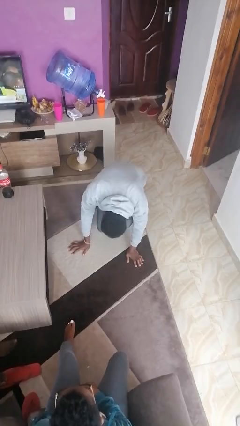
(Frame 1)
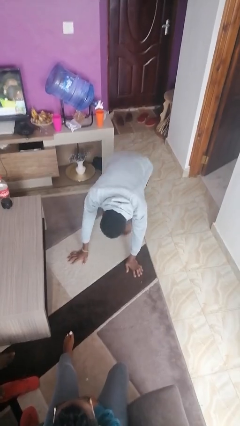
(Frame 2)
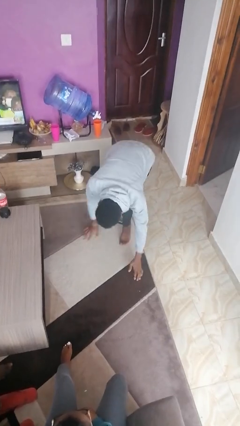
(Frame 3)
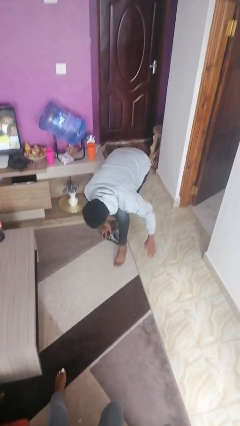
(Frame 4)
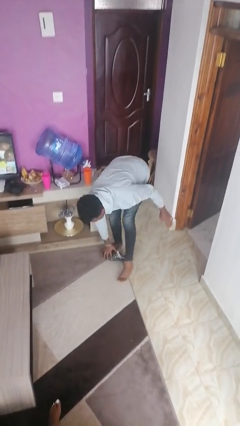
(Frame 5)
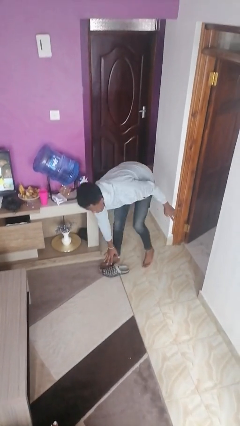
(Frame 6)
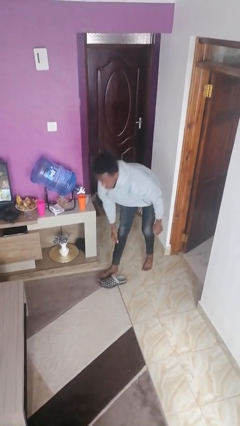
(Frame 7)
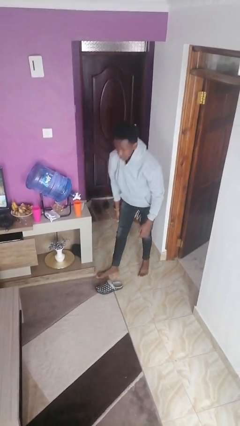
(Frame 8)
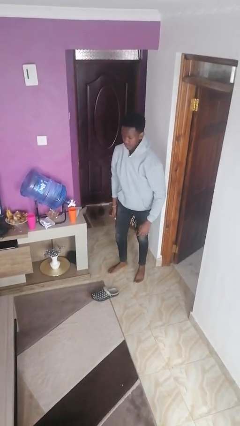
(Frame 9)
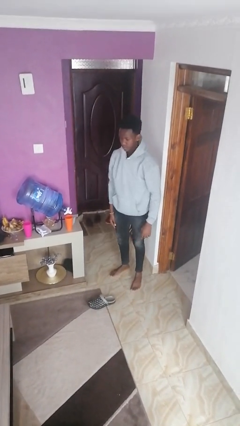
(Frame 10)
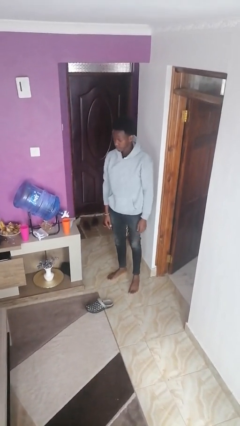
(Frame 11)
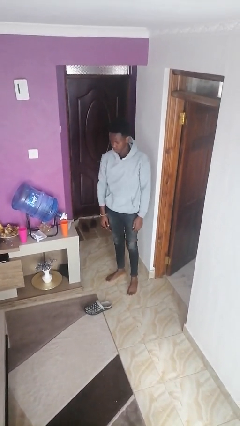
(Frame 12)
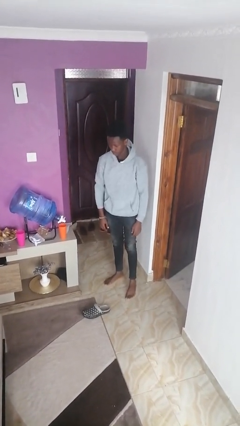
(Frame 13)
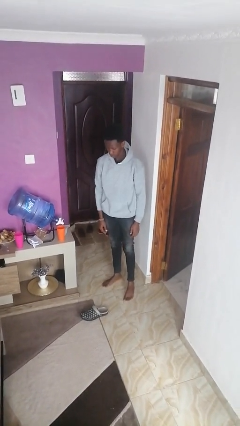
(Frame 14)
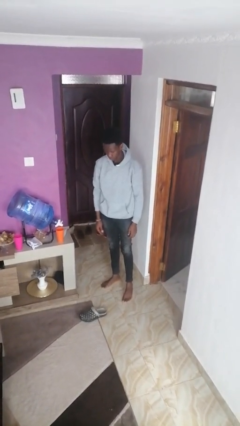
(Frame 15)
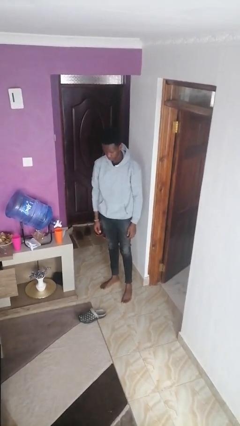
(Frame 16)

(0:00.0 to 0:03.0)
person stands up from floor

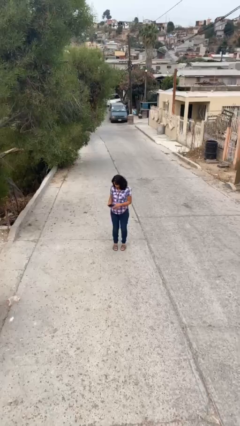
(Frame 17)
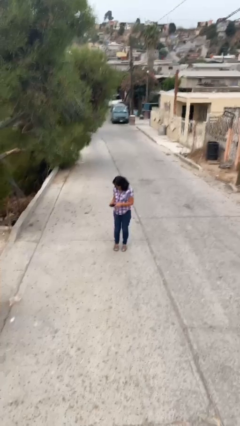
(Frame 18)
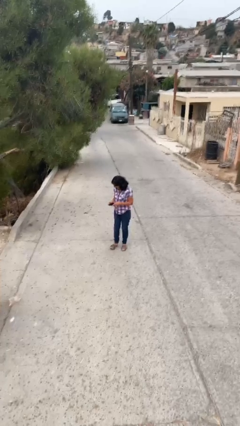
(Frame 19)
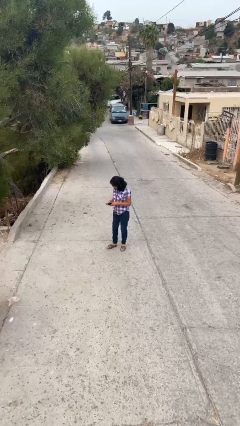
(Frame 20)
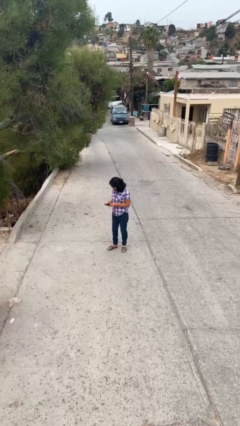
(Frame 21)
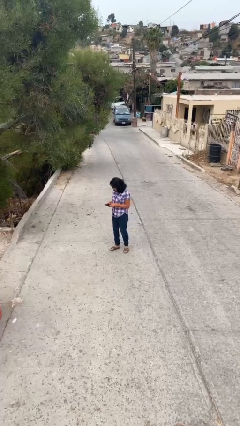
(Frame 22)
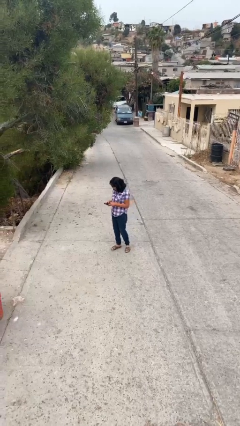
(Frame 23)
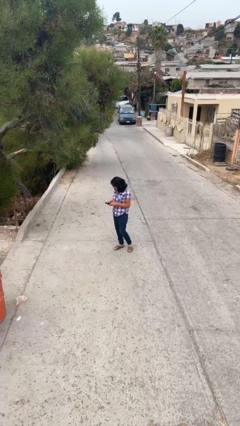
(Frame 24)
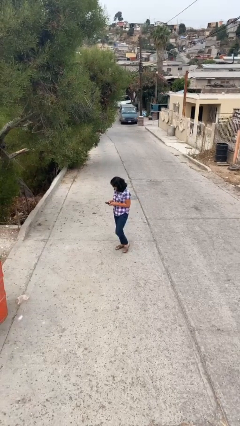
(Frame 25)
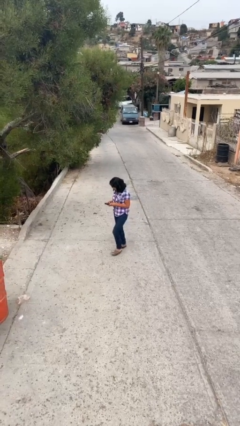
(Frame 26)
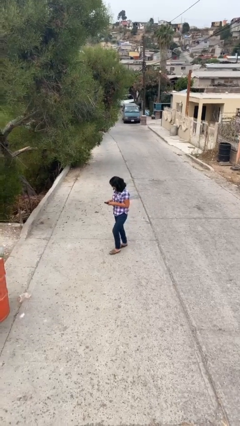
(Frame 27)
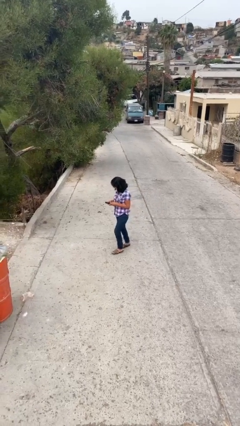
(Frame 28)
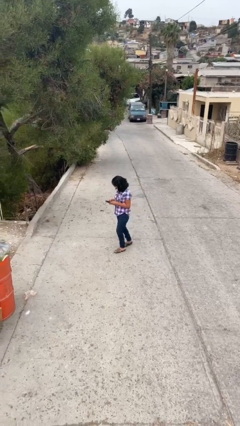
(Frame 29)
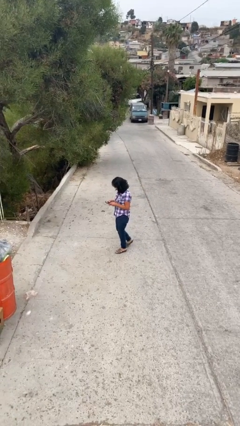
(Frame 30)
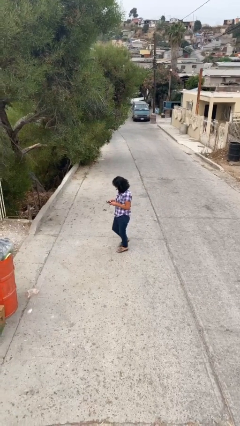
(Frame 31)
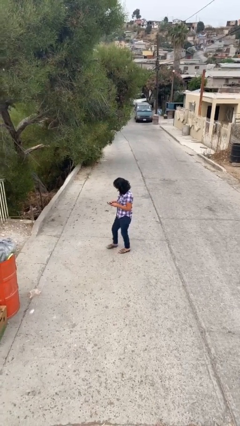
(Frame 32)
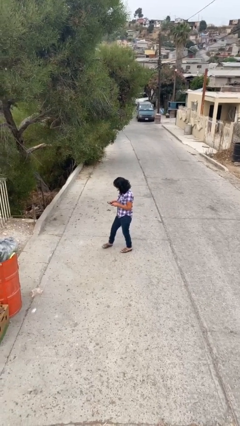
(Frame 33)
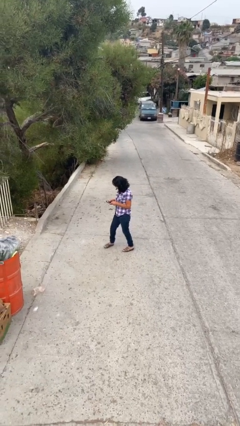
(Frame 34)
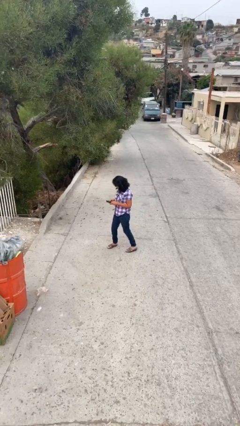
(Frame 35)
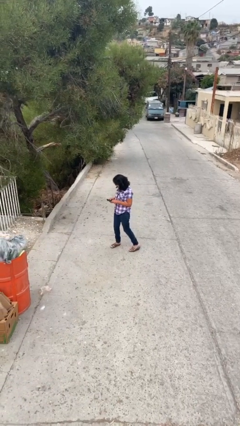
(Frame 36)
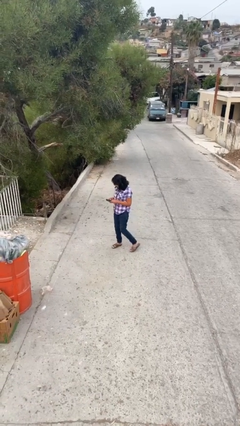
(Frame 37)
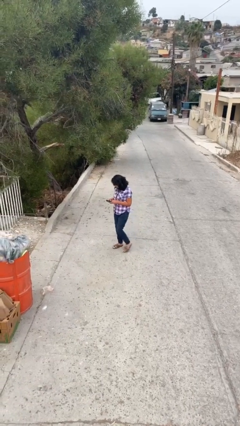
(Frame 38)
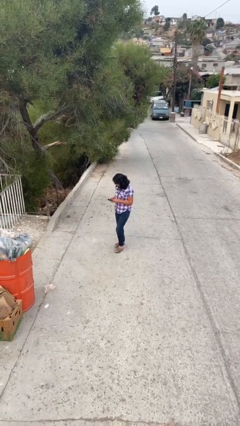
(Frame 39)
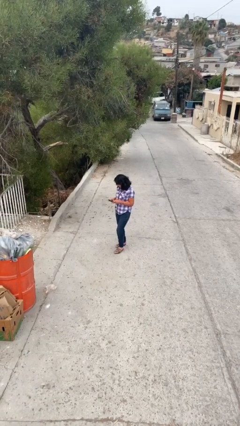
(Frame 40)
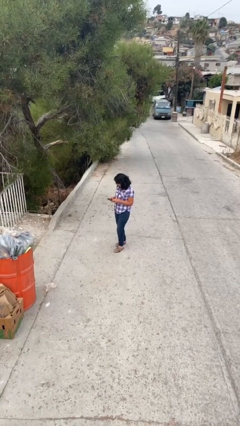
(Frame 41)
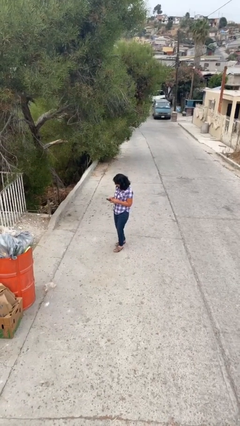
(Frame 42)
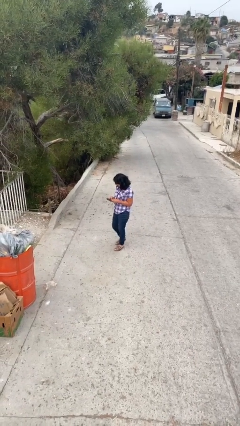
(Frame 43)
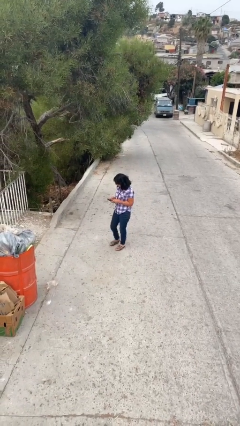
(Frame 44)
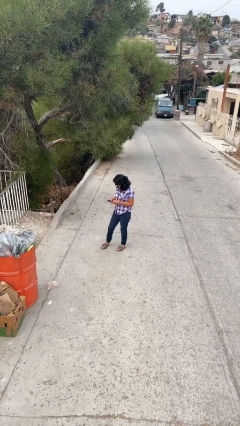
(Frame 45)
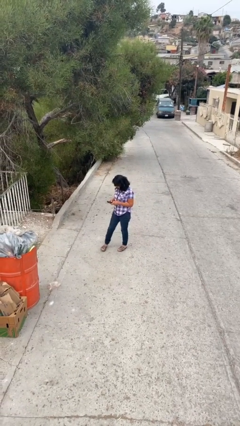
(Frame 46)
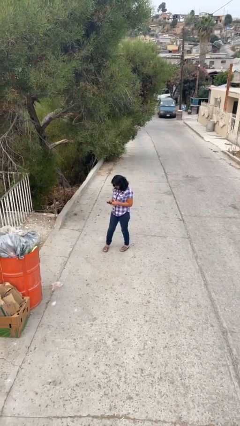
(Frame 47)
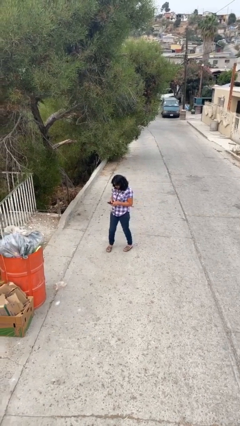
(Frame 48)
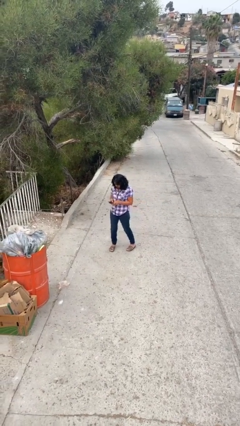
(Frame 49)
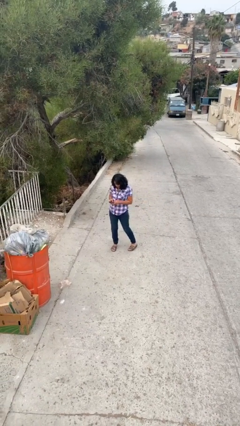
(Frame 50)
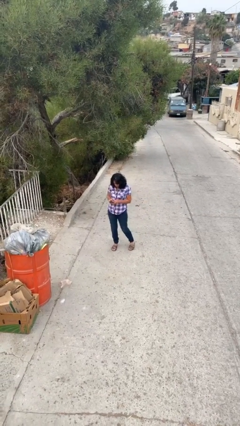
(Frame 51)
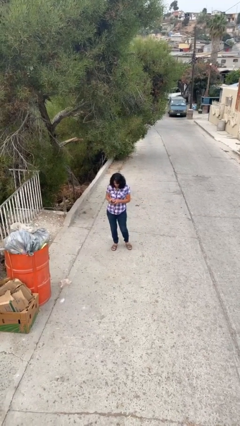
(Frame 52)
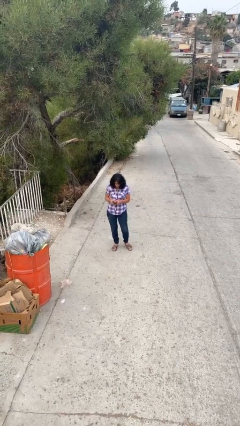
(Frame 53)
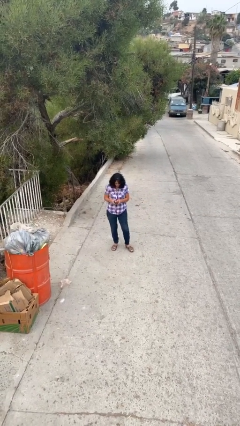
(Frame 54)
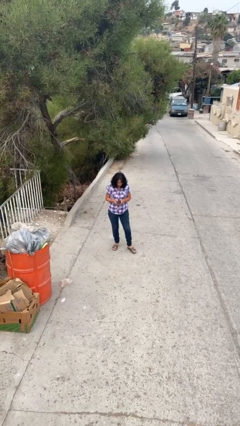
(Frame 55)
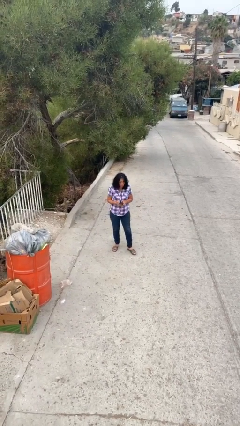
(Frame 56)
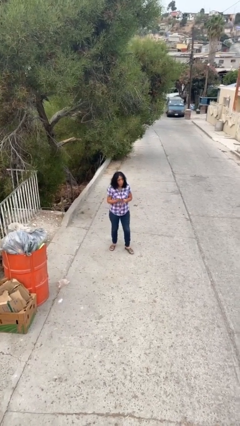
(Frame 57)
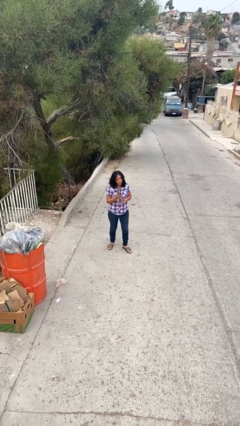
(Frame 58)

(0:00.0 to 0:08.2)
person texts on phone

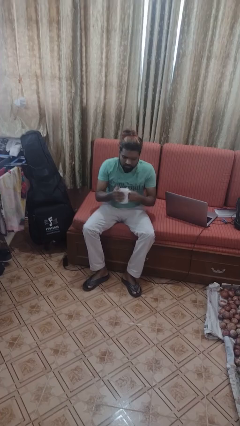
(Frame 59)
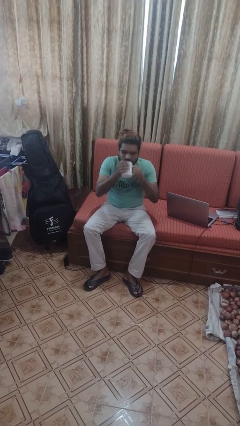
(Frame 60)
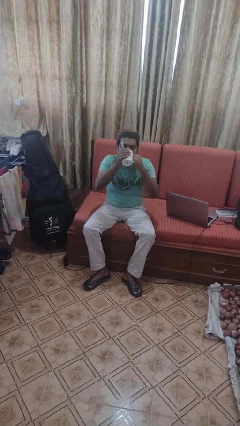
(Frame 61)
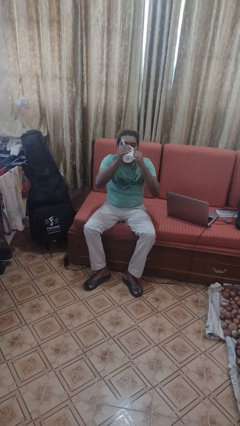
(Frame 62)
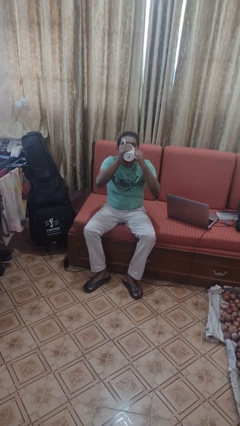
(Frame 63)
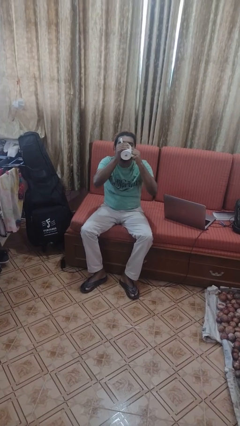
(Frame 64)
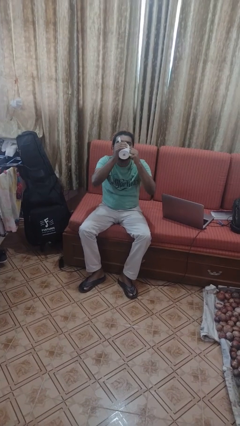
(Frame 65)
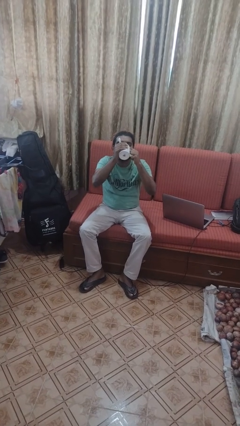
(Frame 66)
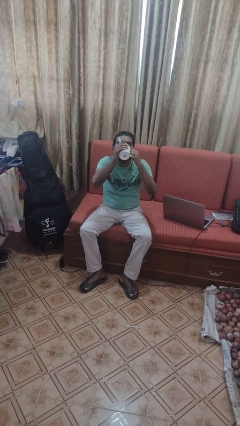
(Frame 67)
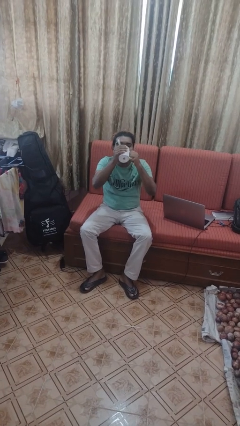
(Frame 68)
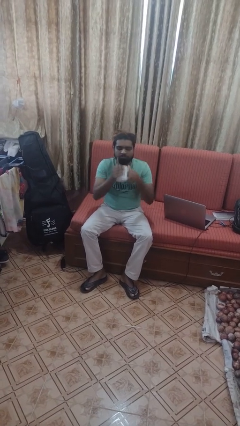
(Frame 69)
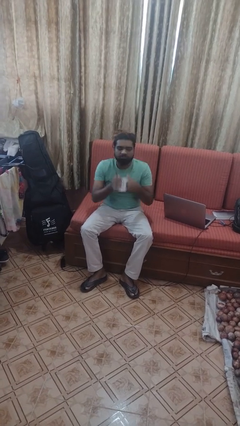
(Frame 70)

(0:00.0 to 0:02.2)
person drinks from mug

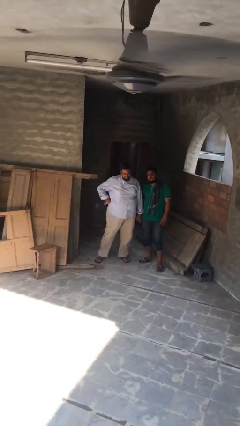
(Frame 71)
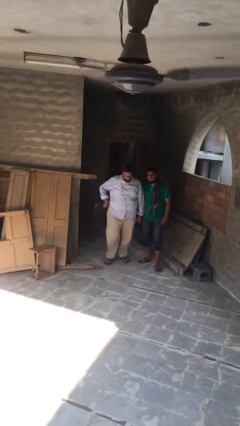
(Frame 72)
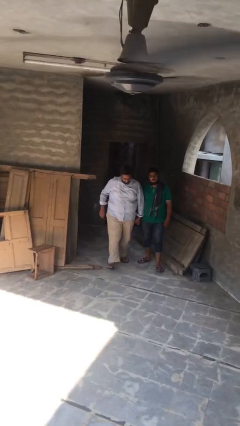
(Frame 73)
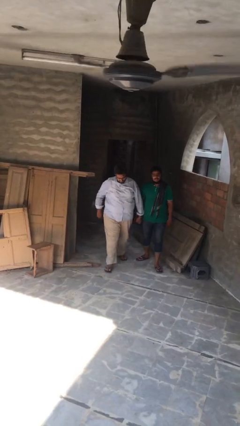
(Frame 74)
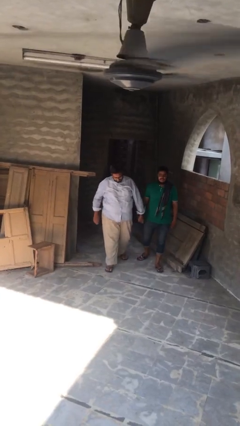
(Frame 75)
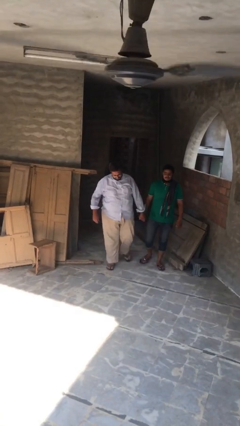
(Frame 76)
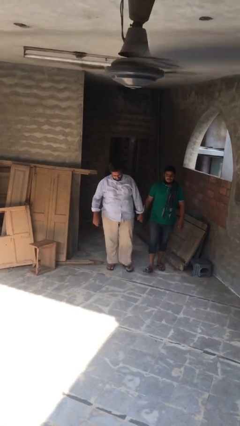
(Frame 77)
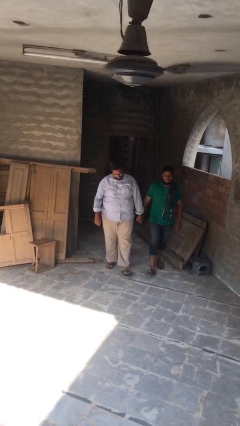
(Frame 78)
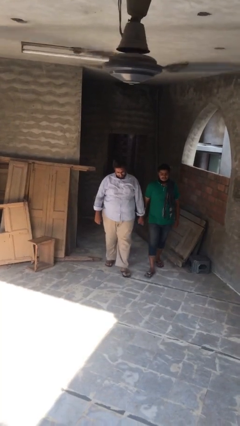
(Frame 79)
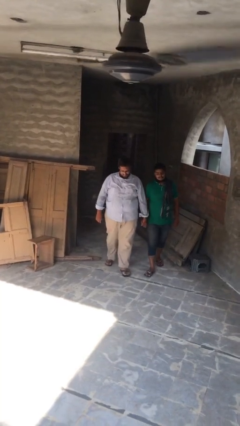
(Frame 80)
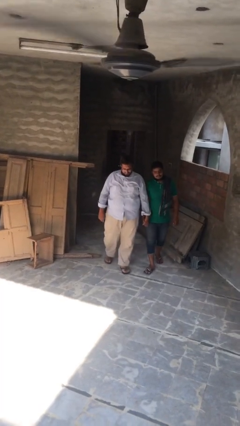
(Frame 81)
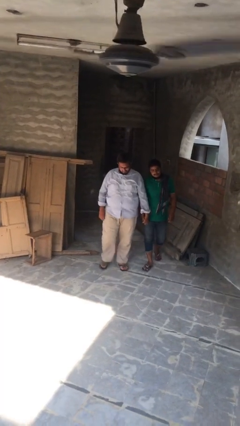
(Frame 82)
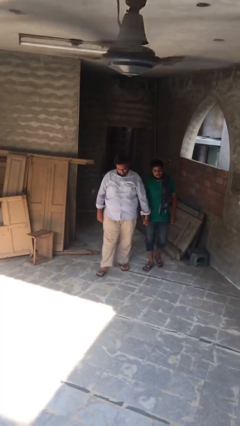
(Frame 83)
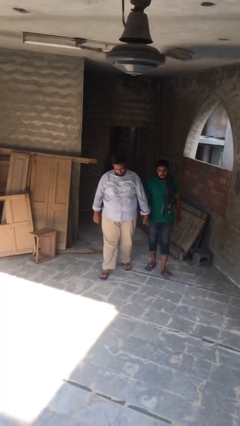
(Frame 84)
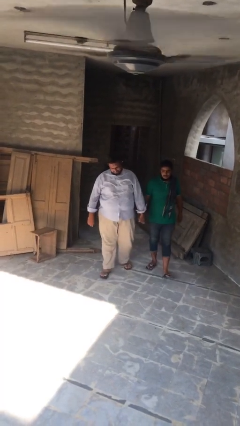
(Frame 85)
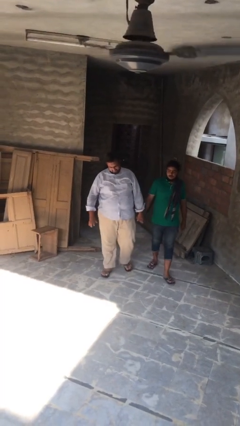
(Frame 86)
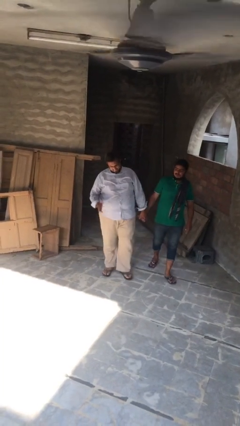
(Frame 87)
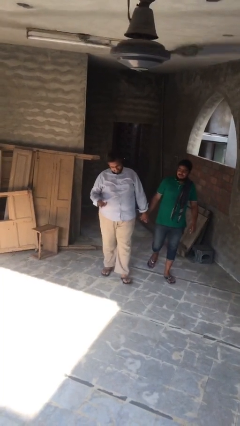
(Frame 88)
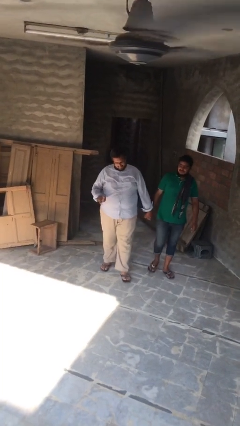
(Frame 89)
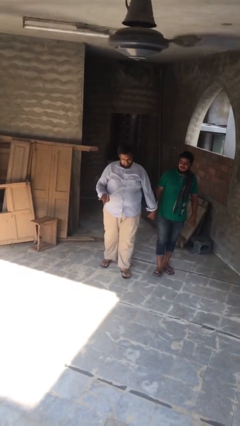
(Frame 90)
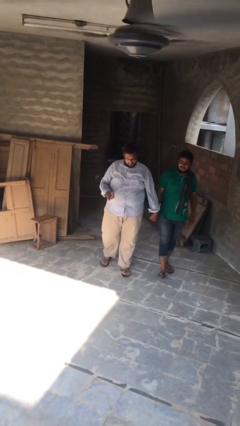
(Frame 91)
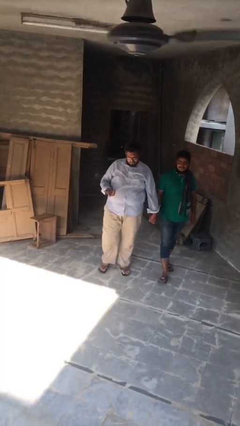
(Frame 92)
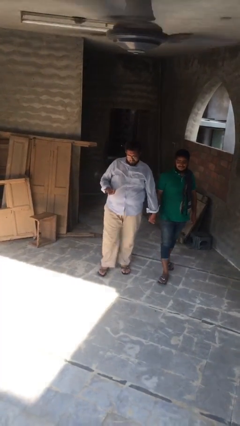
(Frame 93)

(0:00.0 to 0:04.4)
person holds hand
